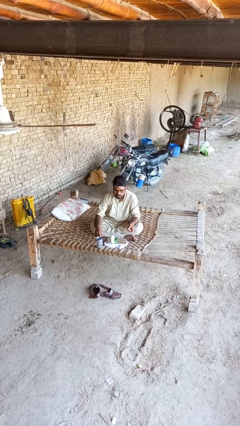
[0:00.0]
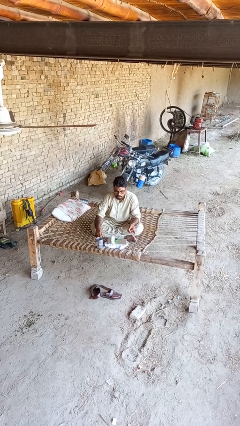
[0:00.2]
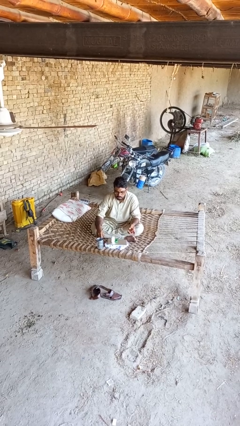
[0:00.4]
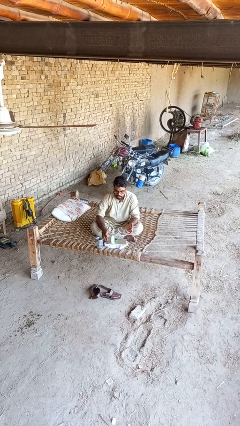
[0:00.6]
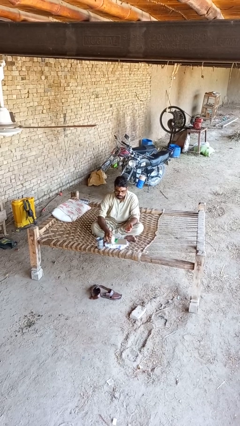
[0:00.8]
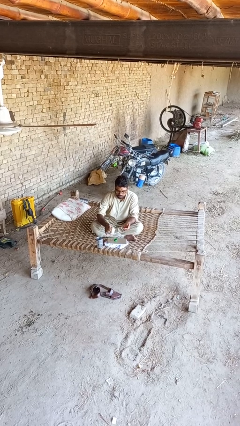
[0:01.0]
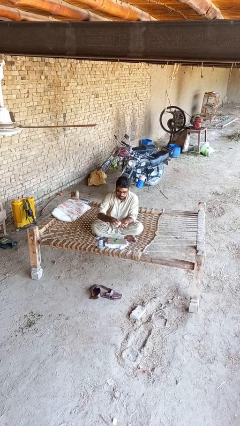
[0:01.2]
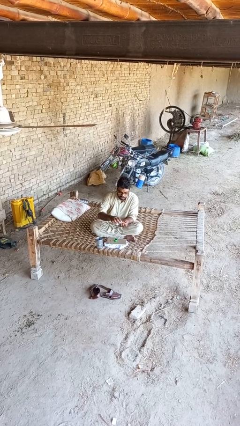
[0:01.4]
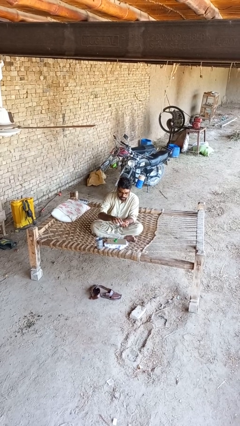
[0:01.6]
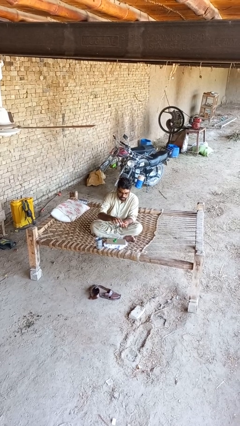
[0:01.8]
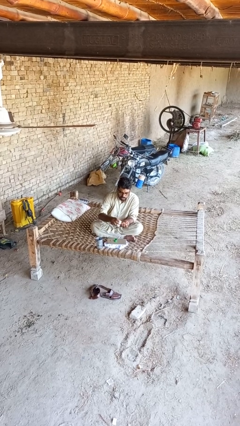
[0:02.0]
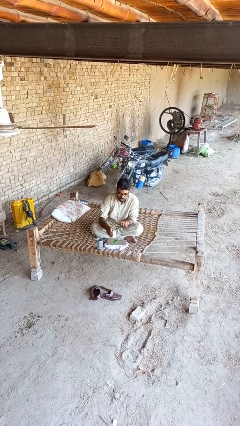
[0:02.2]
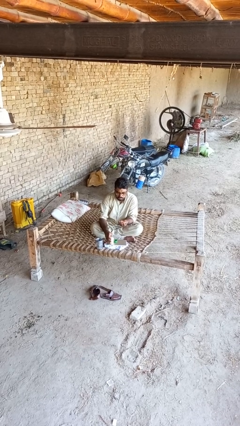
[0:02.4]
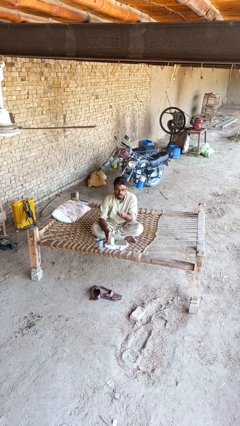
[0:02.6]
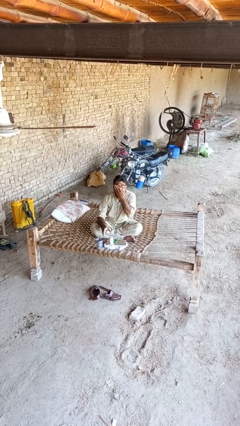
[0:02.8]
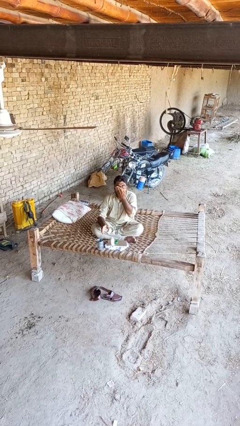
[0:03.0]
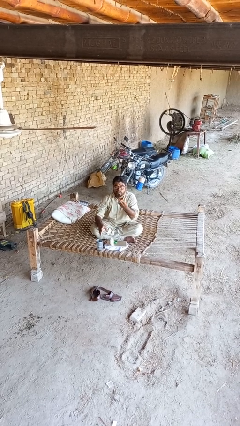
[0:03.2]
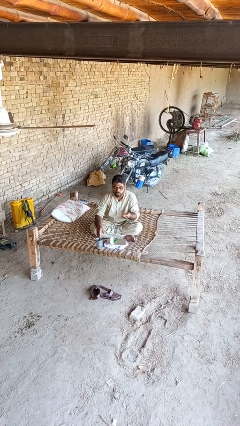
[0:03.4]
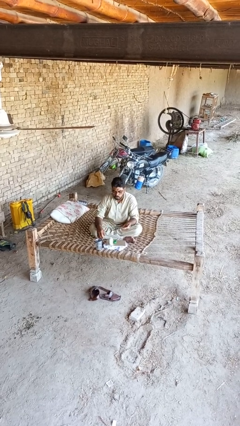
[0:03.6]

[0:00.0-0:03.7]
person takes medicine pills

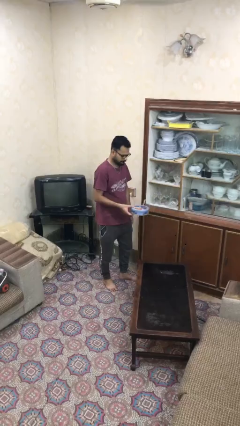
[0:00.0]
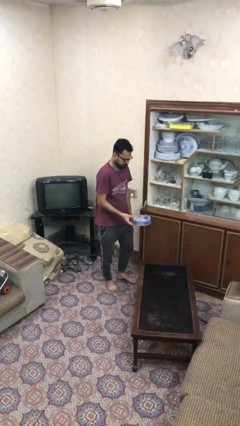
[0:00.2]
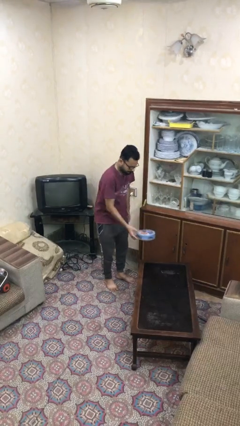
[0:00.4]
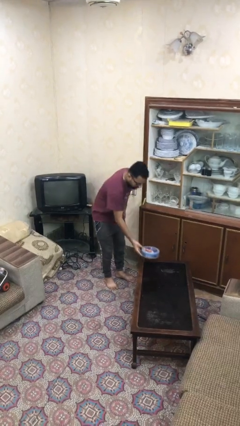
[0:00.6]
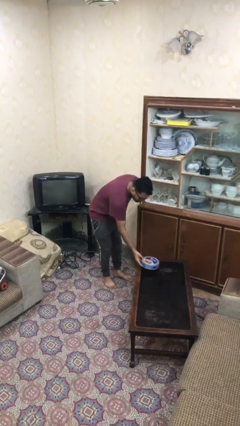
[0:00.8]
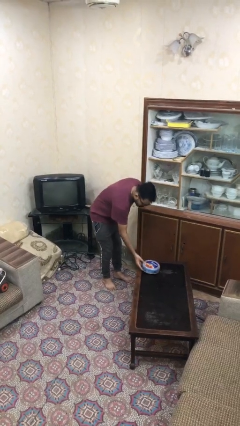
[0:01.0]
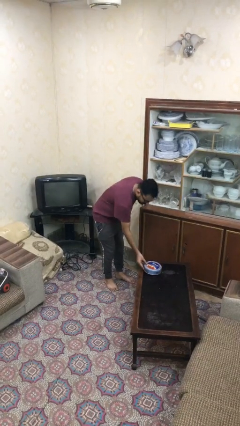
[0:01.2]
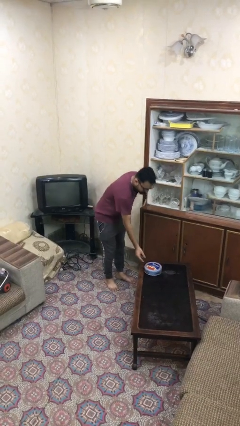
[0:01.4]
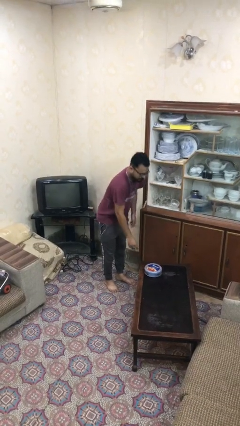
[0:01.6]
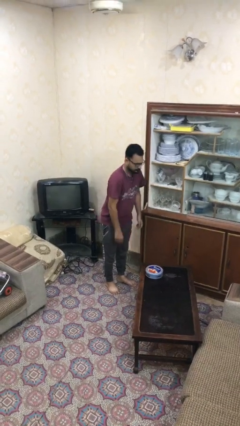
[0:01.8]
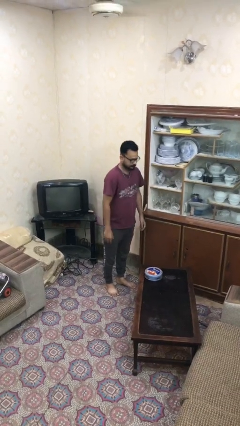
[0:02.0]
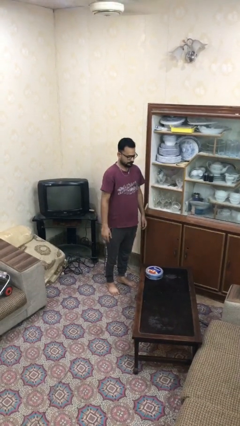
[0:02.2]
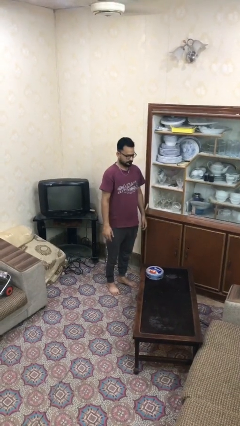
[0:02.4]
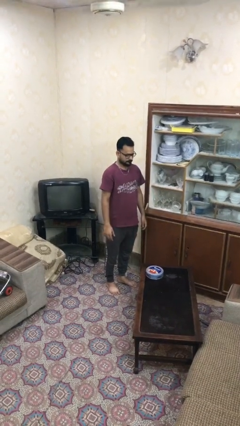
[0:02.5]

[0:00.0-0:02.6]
person puts down object on table

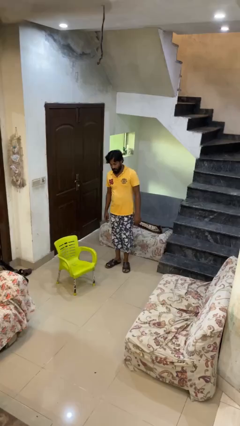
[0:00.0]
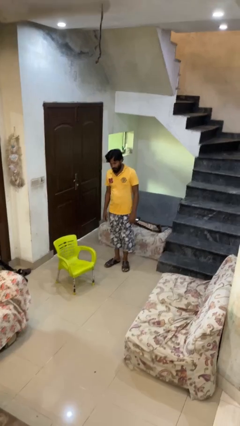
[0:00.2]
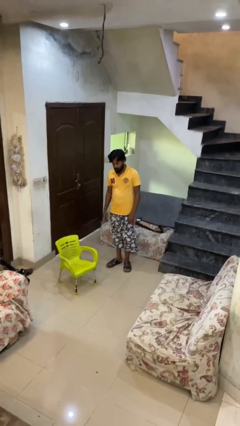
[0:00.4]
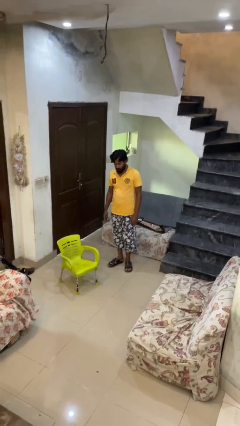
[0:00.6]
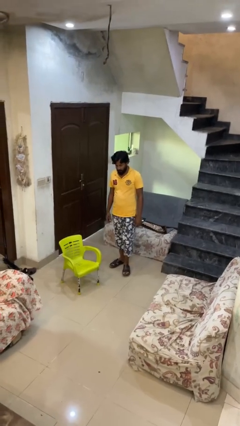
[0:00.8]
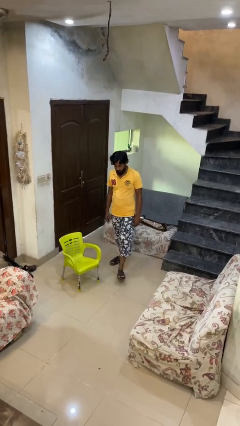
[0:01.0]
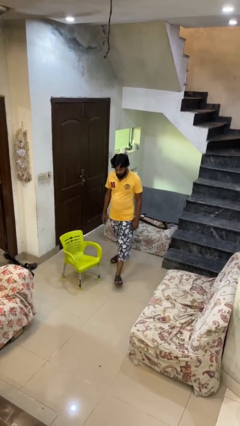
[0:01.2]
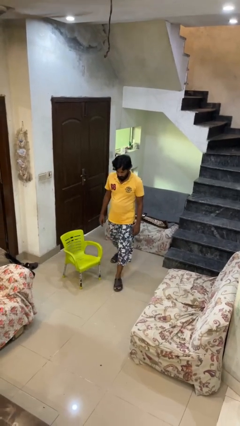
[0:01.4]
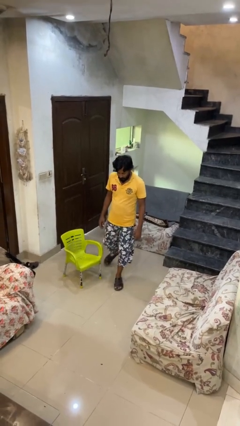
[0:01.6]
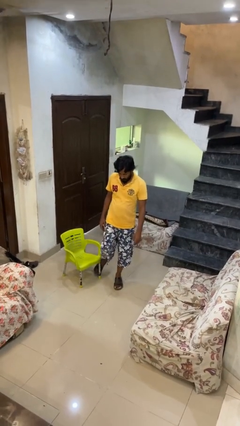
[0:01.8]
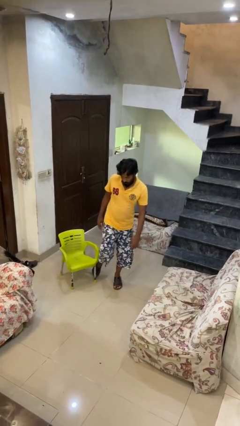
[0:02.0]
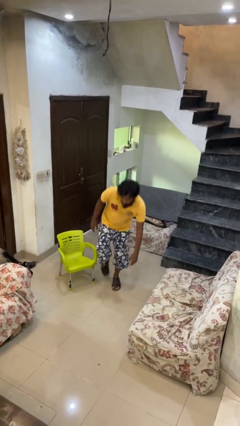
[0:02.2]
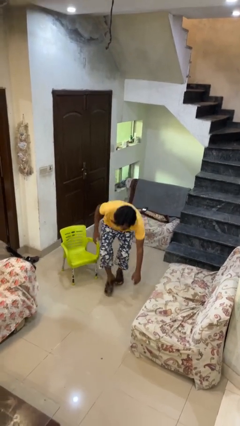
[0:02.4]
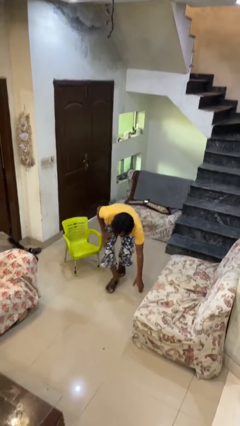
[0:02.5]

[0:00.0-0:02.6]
person trips on object on floor

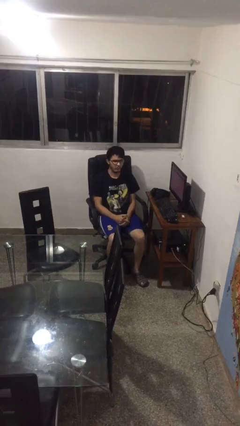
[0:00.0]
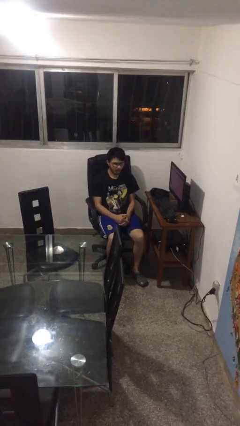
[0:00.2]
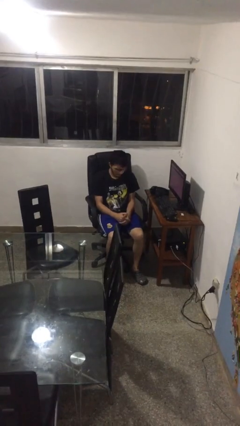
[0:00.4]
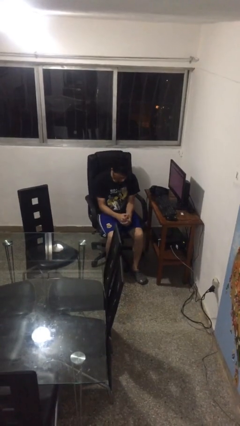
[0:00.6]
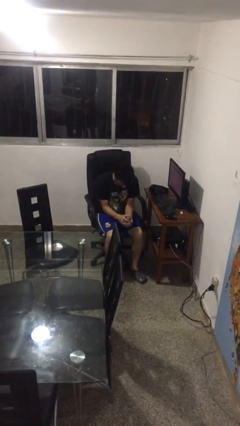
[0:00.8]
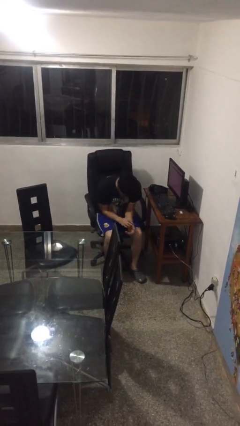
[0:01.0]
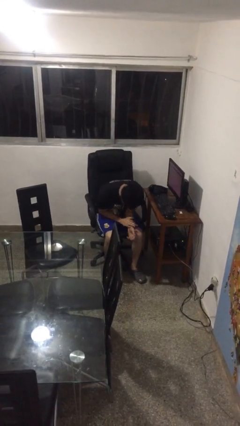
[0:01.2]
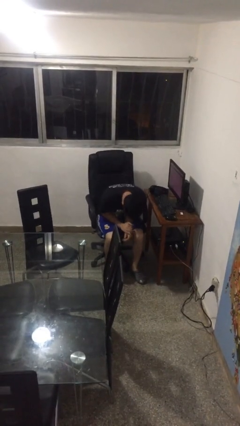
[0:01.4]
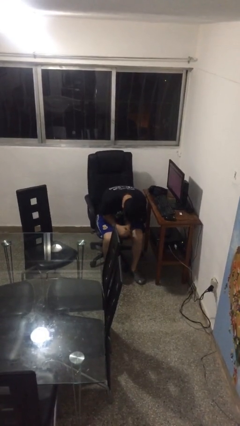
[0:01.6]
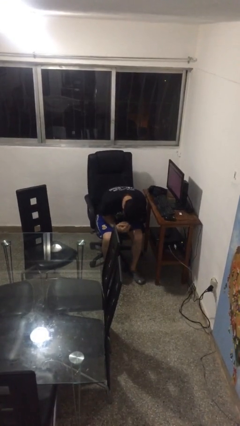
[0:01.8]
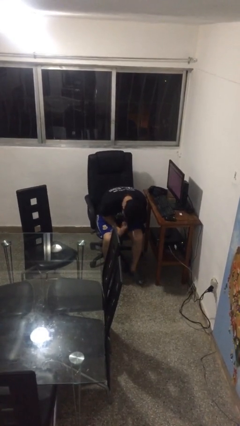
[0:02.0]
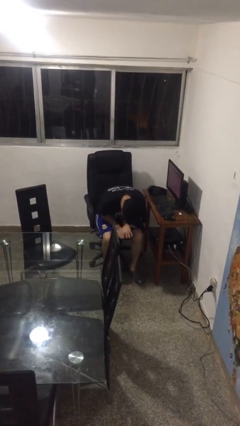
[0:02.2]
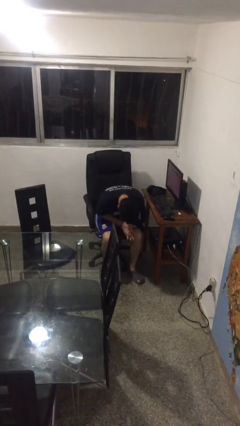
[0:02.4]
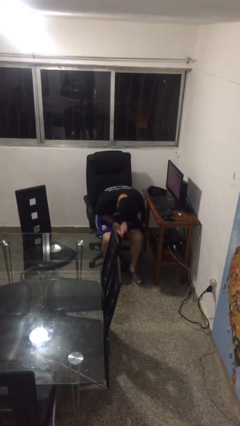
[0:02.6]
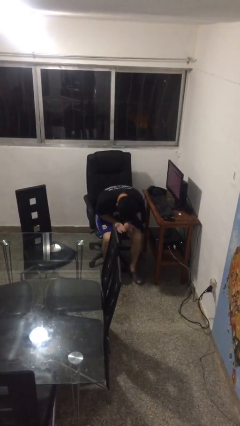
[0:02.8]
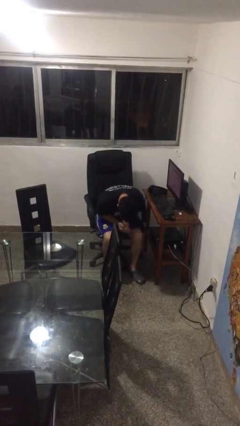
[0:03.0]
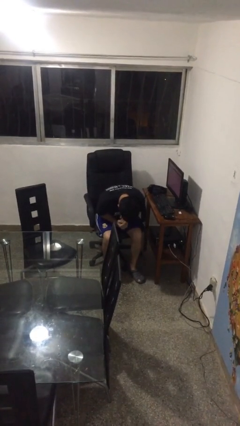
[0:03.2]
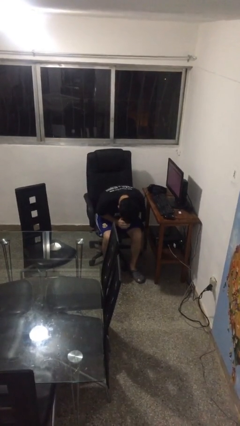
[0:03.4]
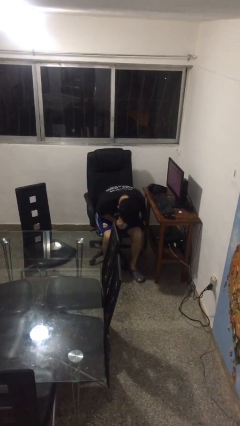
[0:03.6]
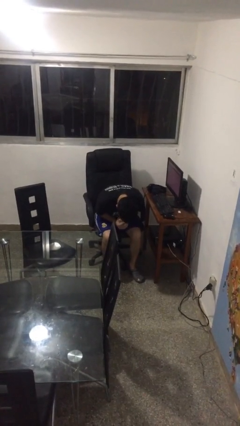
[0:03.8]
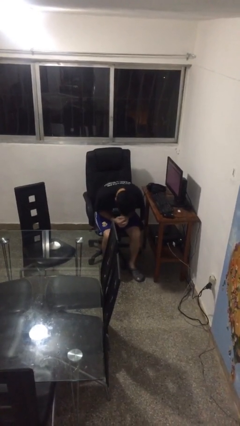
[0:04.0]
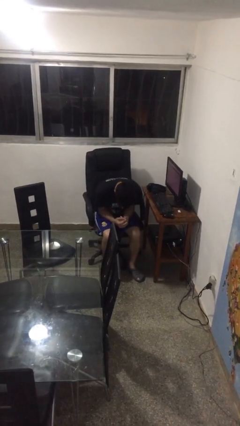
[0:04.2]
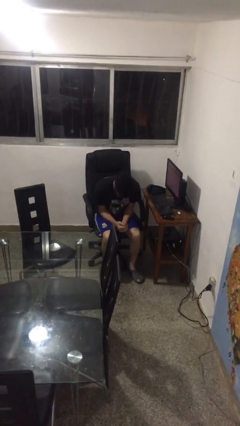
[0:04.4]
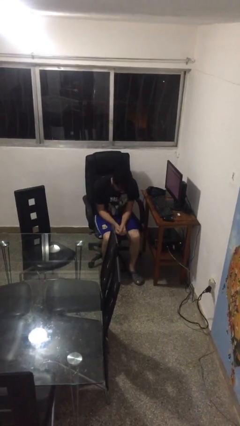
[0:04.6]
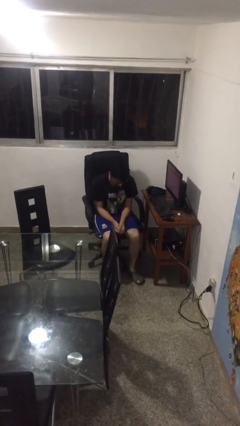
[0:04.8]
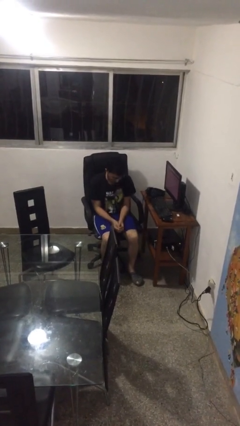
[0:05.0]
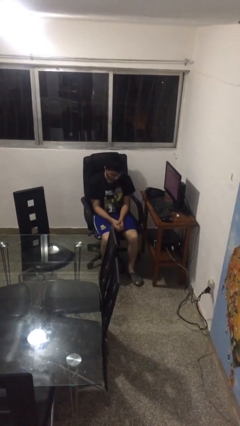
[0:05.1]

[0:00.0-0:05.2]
person looks at hands in lap

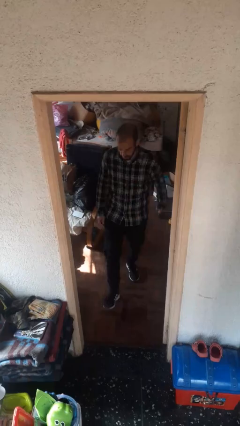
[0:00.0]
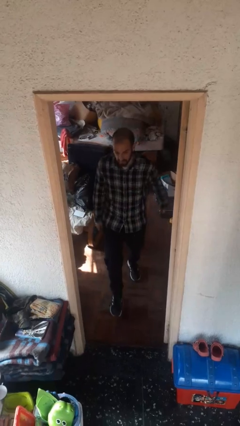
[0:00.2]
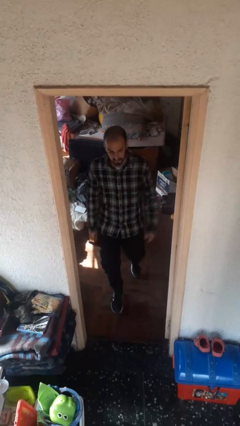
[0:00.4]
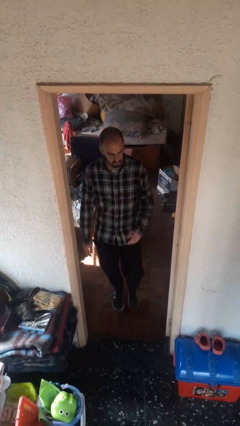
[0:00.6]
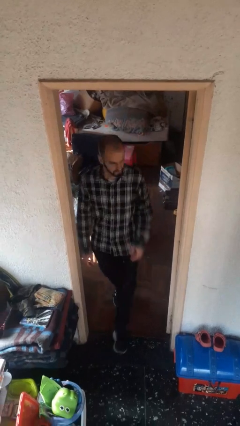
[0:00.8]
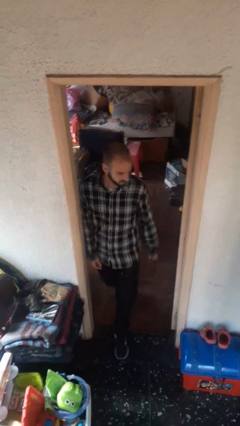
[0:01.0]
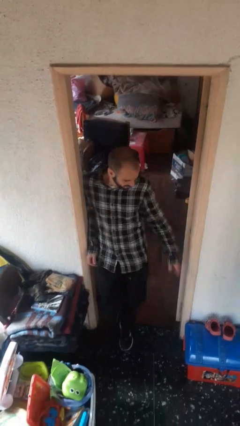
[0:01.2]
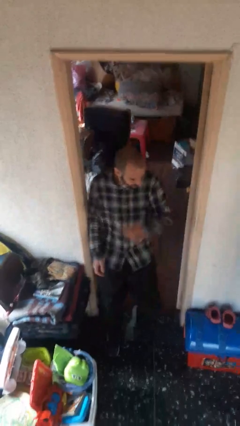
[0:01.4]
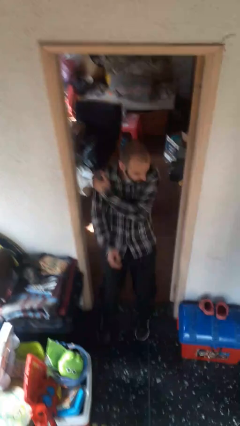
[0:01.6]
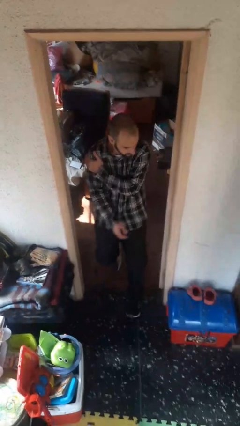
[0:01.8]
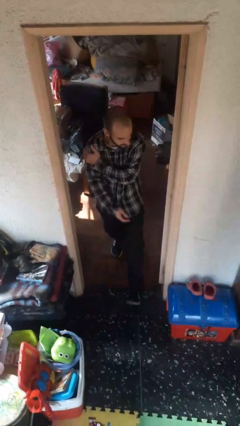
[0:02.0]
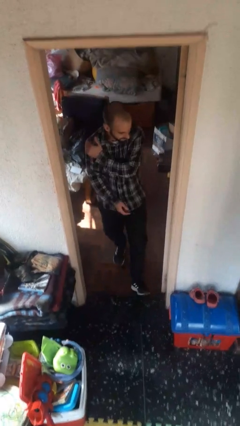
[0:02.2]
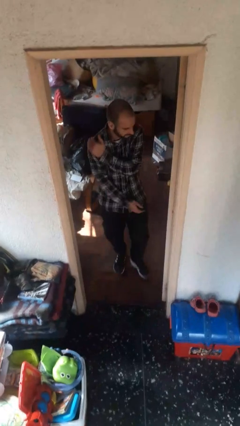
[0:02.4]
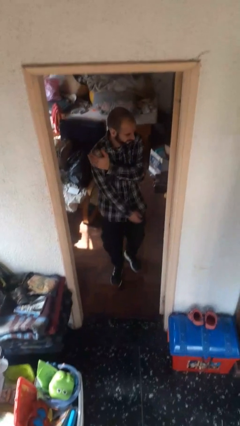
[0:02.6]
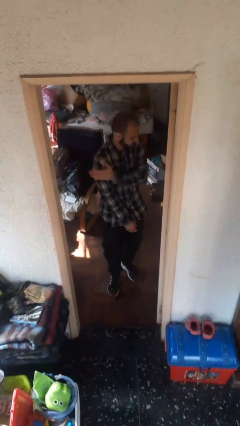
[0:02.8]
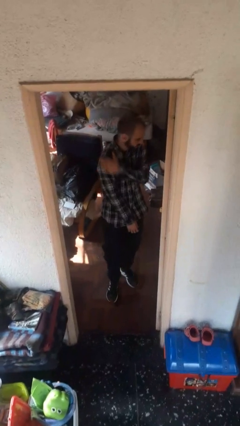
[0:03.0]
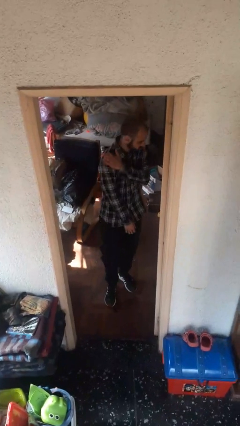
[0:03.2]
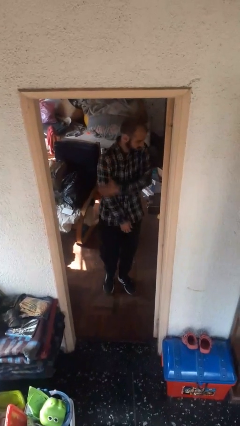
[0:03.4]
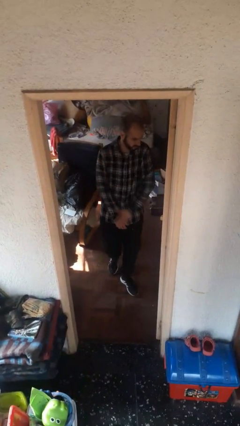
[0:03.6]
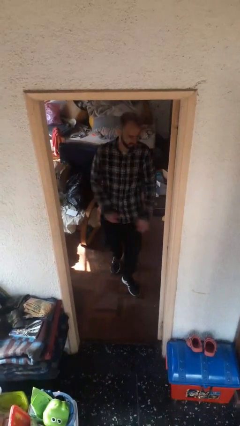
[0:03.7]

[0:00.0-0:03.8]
person bumps into wall
